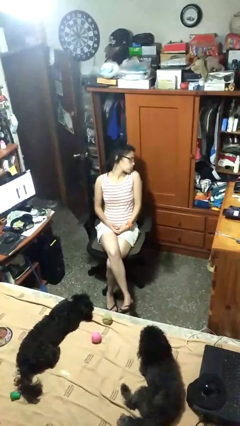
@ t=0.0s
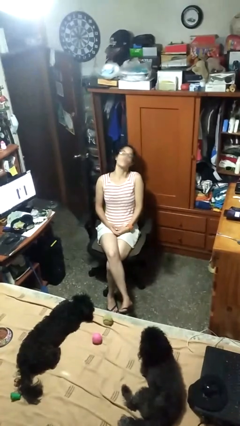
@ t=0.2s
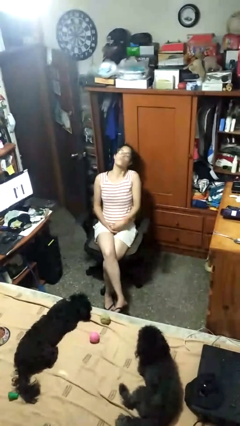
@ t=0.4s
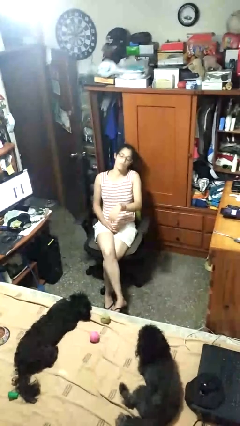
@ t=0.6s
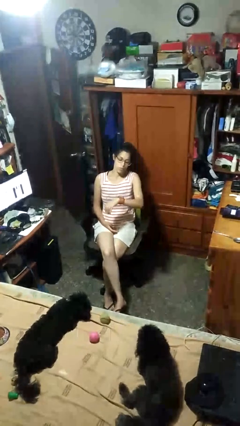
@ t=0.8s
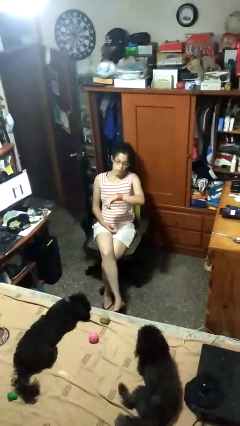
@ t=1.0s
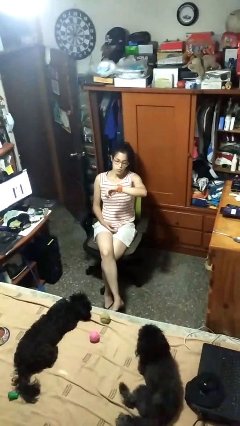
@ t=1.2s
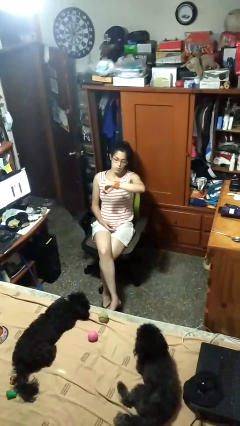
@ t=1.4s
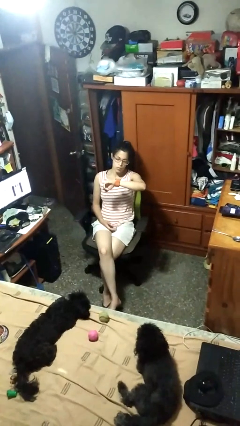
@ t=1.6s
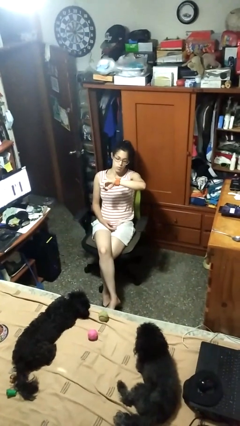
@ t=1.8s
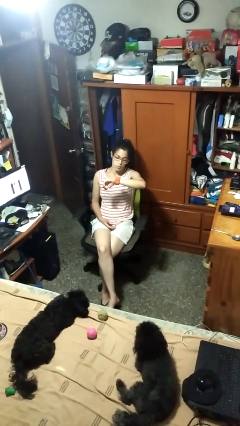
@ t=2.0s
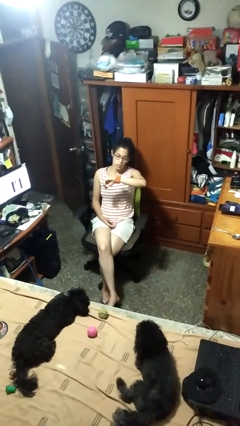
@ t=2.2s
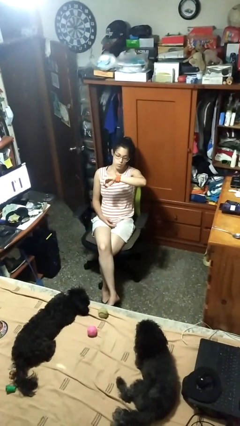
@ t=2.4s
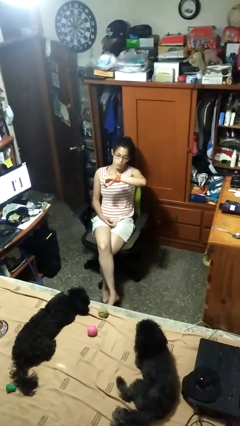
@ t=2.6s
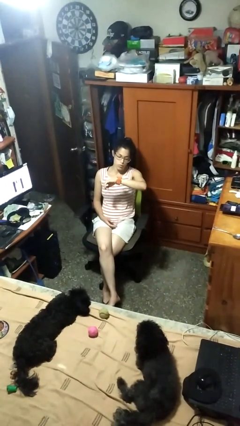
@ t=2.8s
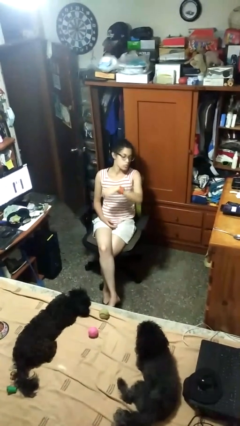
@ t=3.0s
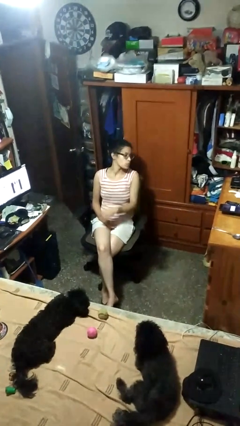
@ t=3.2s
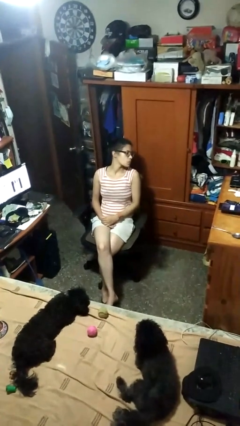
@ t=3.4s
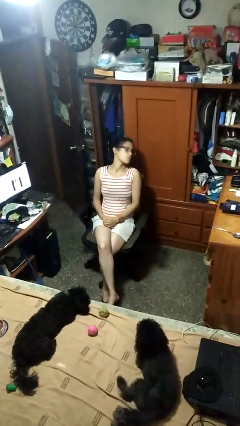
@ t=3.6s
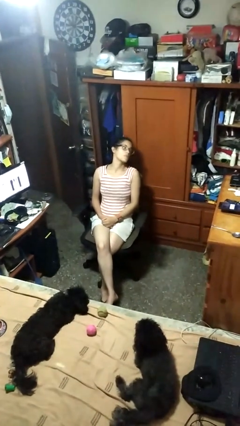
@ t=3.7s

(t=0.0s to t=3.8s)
person looks at wristwatch

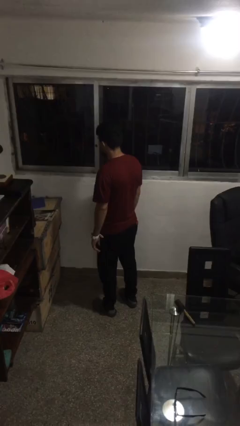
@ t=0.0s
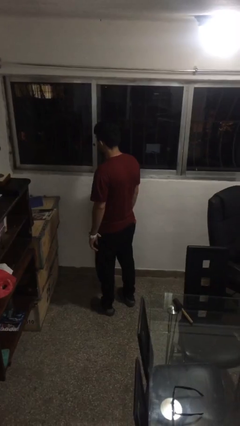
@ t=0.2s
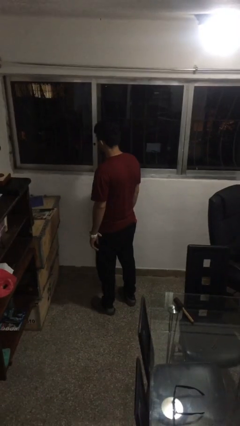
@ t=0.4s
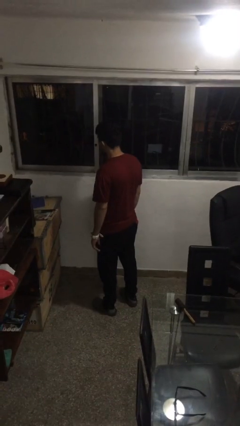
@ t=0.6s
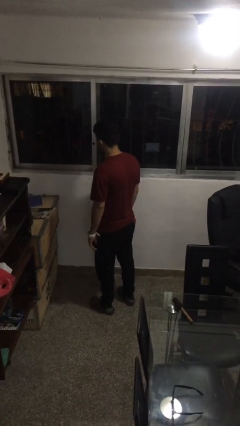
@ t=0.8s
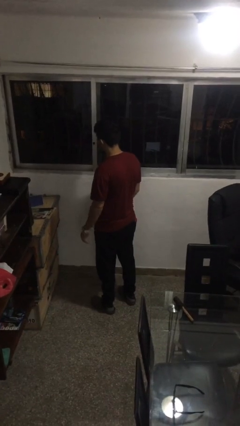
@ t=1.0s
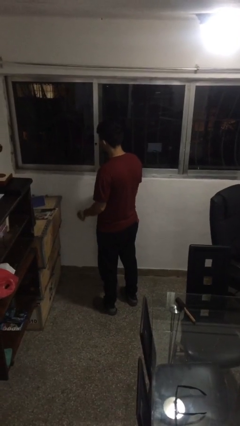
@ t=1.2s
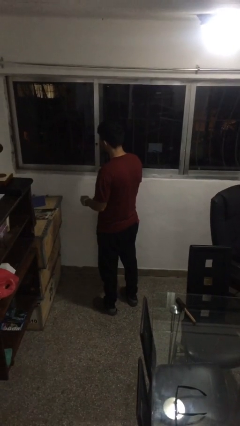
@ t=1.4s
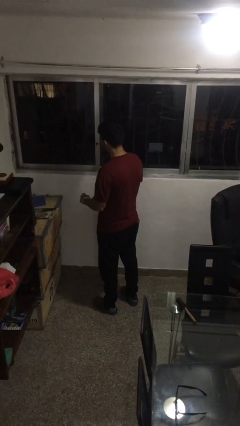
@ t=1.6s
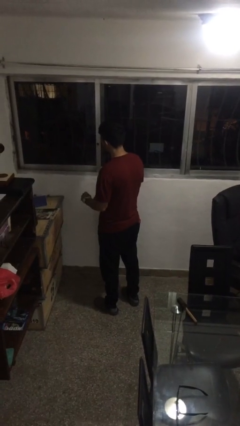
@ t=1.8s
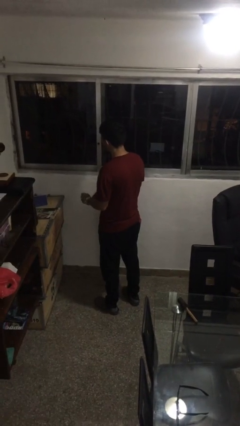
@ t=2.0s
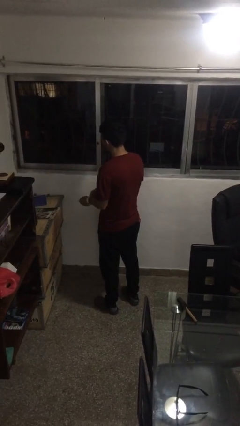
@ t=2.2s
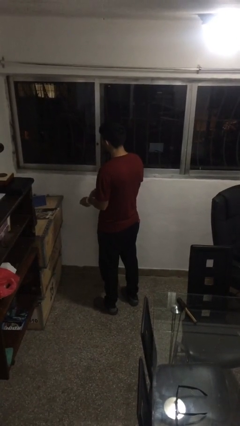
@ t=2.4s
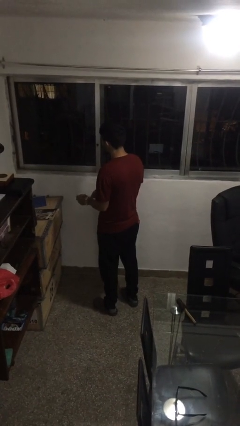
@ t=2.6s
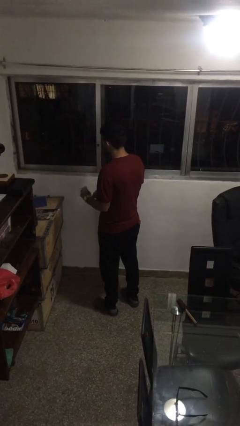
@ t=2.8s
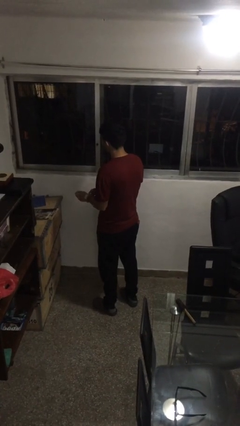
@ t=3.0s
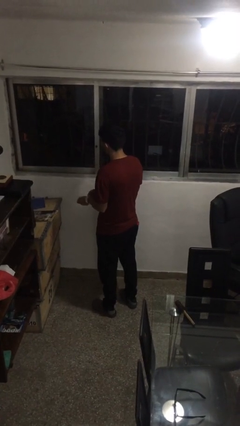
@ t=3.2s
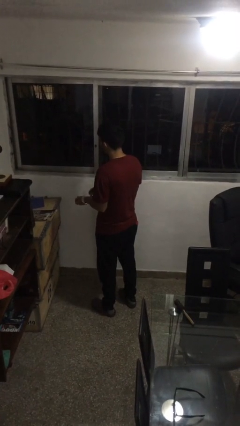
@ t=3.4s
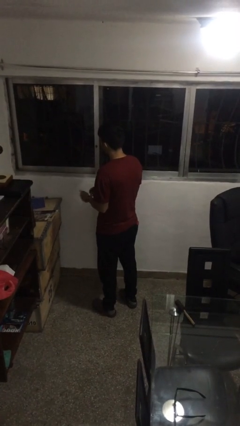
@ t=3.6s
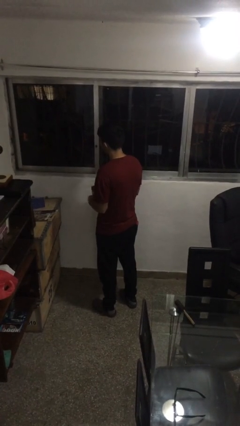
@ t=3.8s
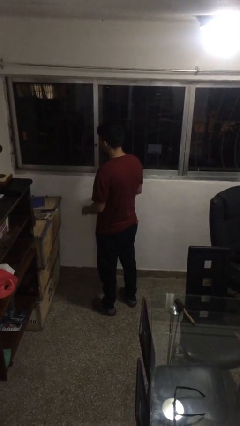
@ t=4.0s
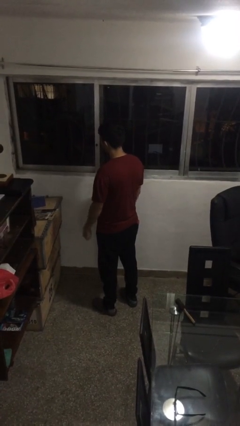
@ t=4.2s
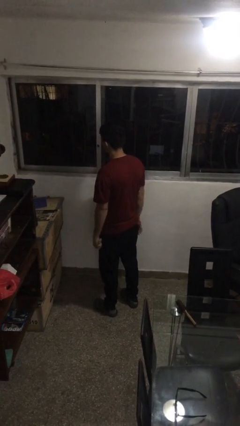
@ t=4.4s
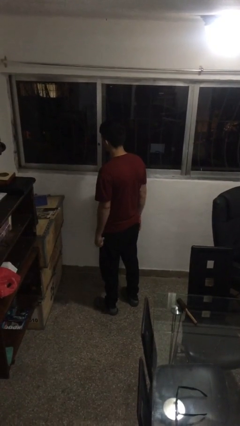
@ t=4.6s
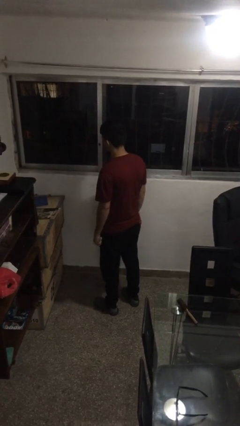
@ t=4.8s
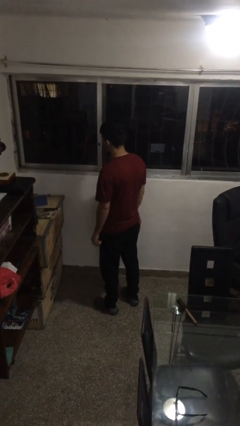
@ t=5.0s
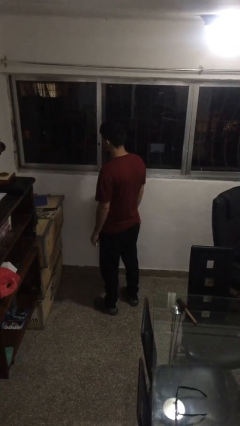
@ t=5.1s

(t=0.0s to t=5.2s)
person takes off wristwatch

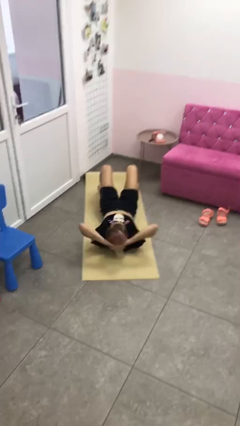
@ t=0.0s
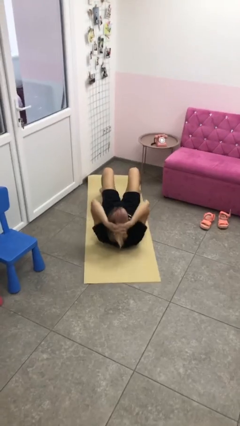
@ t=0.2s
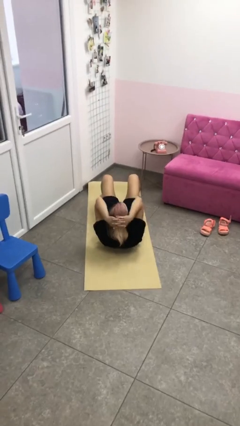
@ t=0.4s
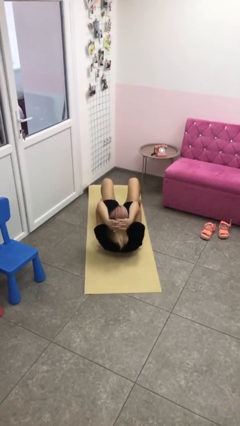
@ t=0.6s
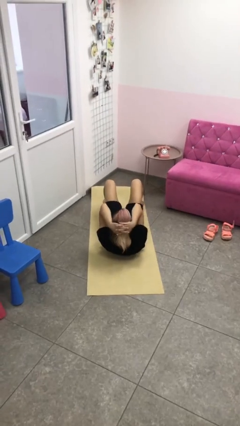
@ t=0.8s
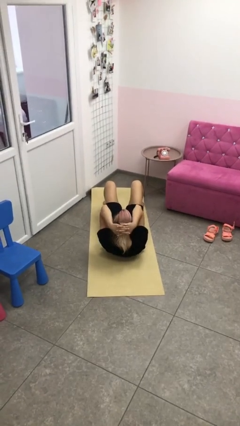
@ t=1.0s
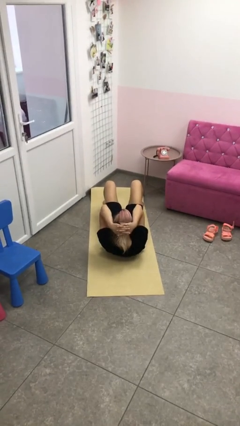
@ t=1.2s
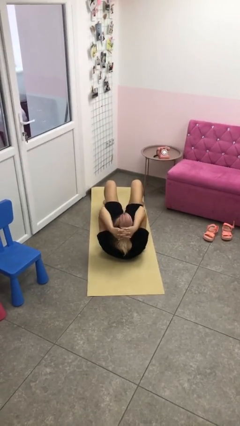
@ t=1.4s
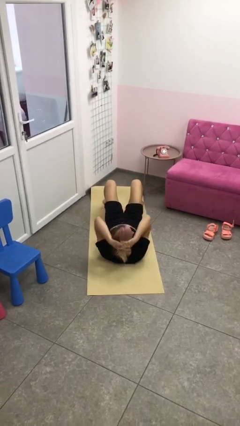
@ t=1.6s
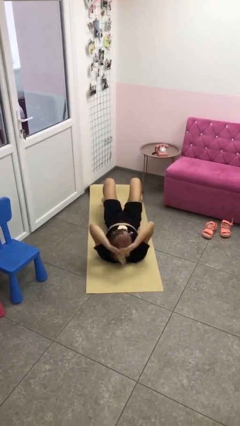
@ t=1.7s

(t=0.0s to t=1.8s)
person exercises with situp

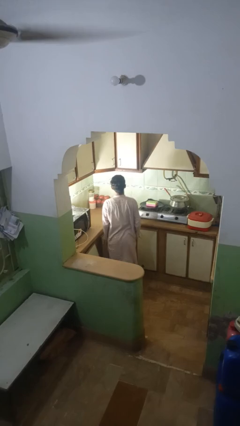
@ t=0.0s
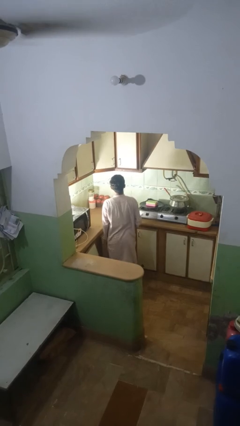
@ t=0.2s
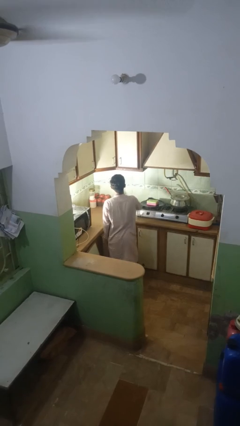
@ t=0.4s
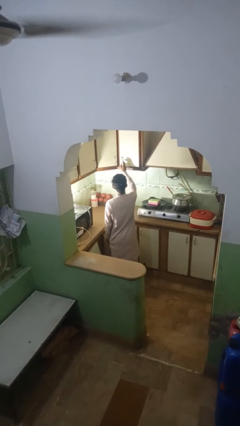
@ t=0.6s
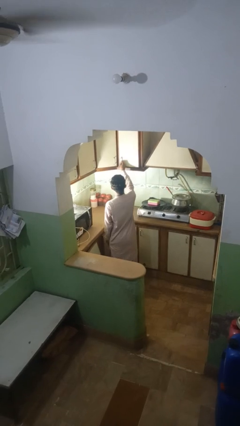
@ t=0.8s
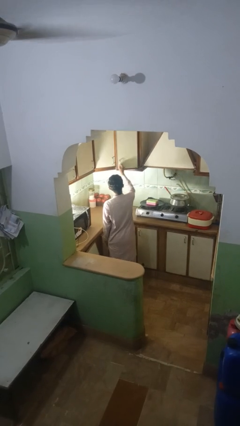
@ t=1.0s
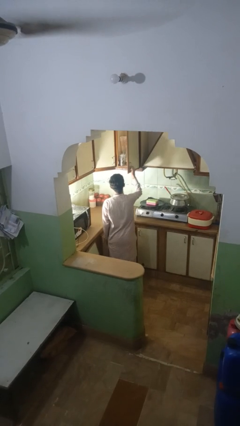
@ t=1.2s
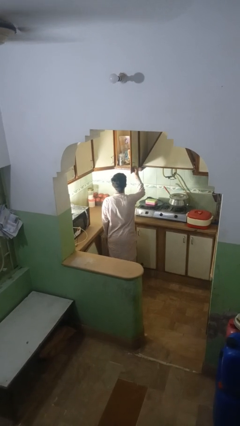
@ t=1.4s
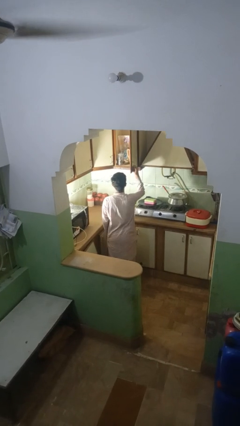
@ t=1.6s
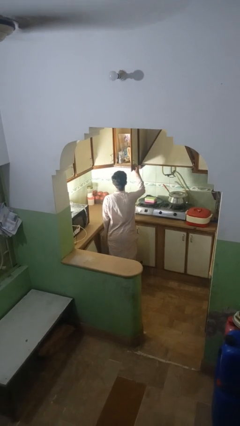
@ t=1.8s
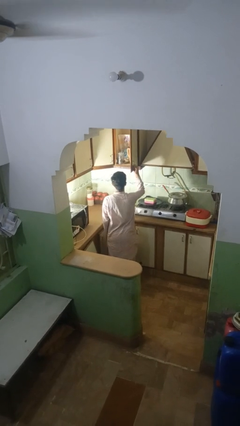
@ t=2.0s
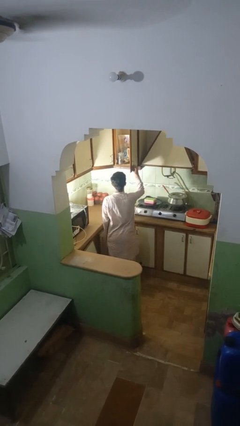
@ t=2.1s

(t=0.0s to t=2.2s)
person opens kitchen drawer

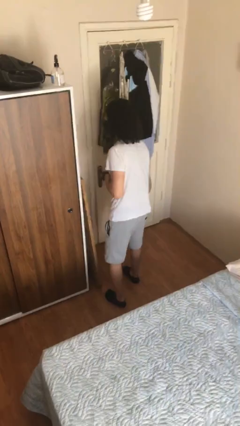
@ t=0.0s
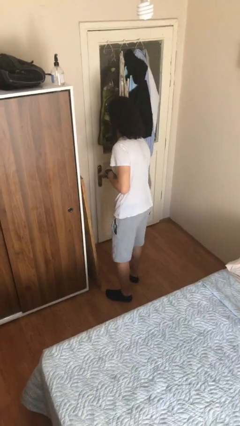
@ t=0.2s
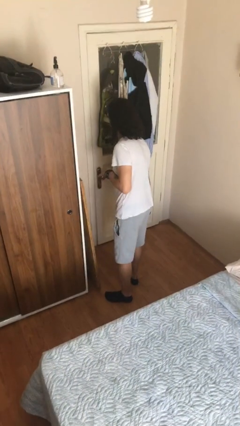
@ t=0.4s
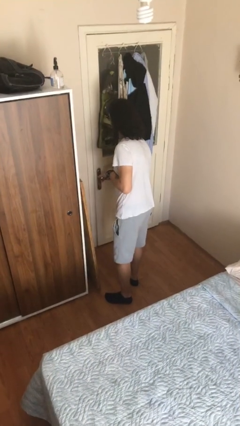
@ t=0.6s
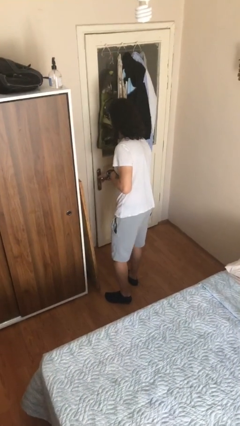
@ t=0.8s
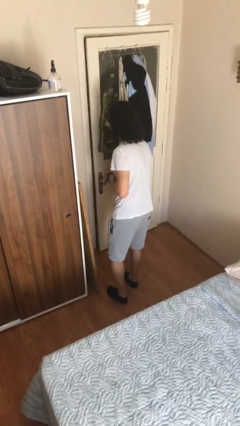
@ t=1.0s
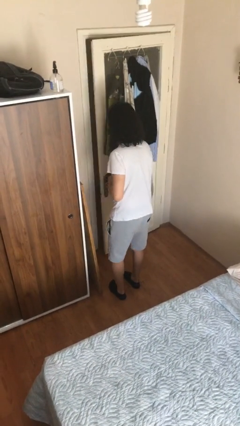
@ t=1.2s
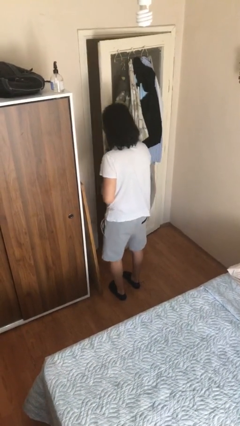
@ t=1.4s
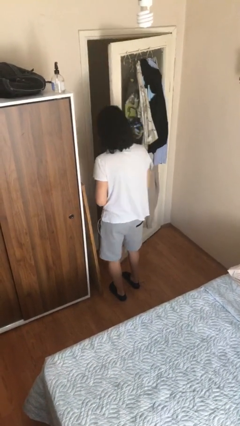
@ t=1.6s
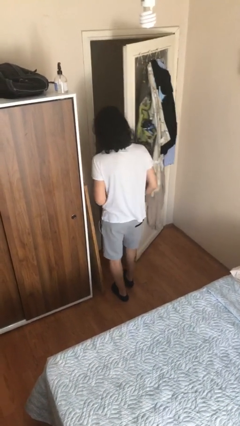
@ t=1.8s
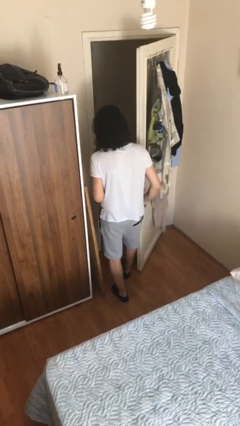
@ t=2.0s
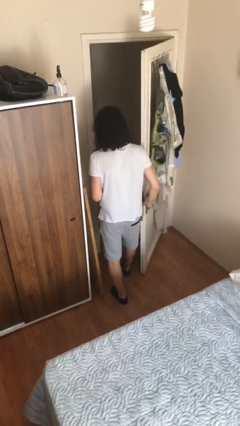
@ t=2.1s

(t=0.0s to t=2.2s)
person opens facility door

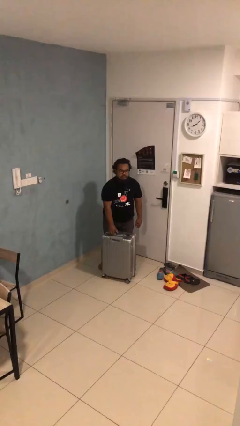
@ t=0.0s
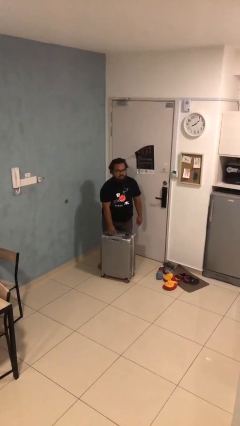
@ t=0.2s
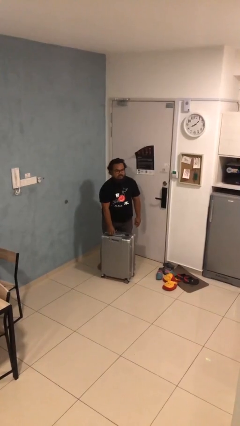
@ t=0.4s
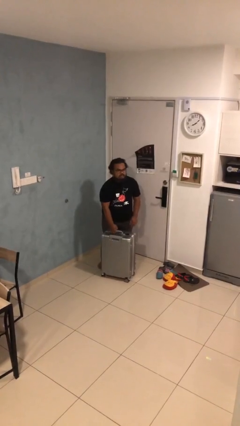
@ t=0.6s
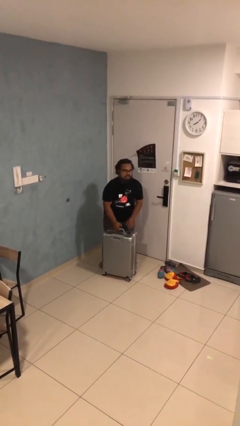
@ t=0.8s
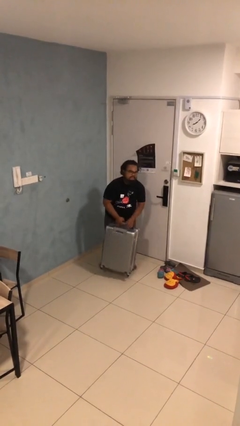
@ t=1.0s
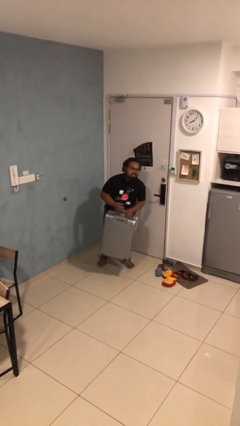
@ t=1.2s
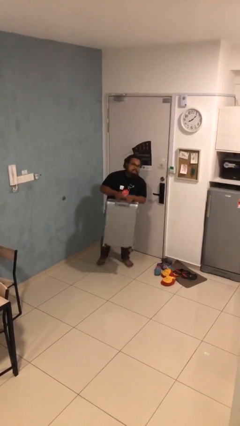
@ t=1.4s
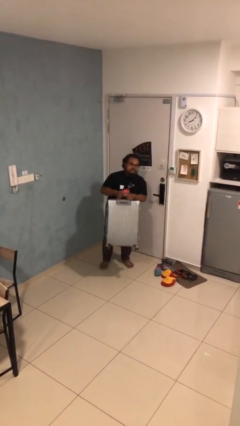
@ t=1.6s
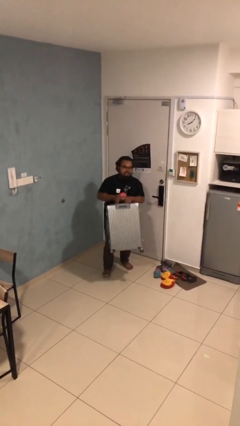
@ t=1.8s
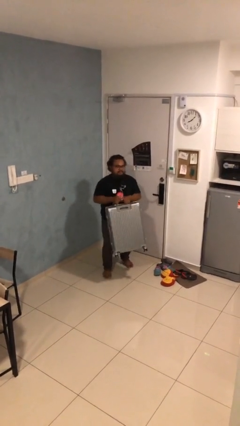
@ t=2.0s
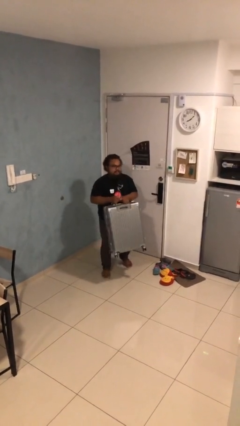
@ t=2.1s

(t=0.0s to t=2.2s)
person picks up object from floor
